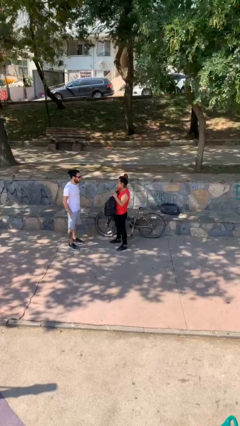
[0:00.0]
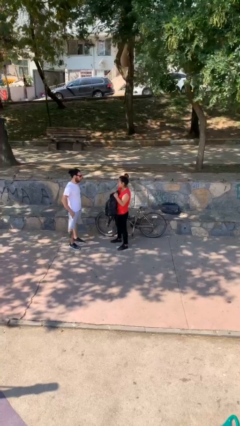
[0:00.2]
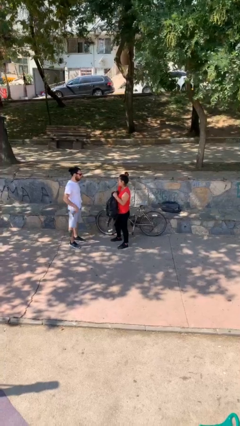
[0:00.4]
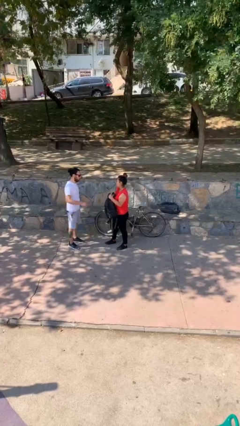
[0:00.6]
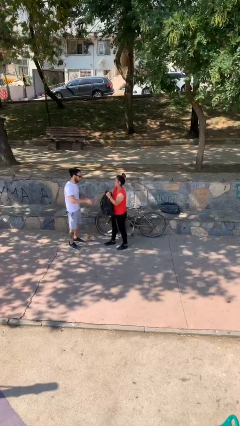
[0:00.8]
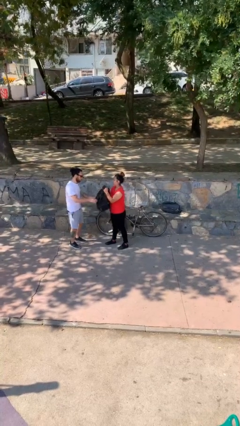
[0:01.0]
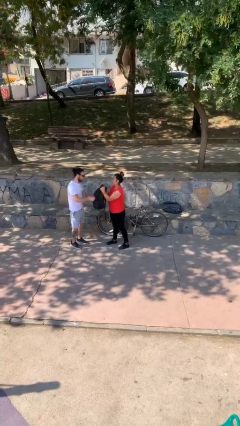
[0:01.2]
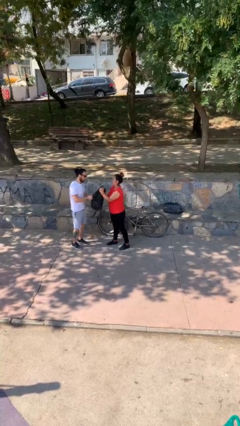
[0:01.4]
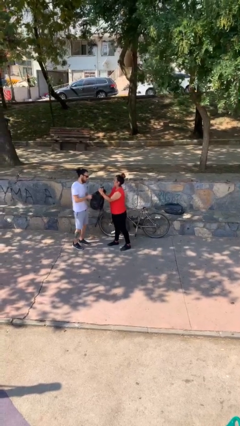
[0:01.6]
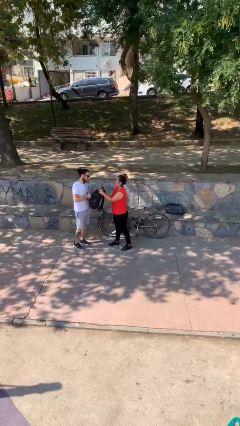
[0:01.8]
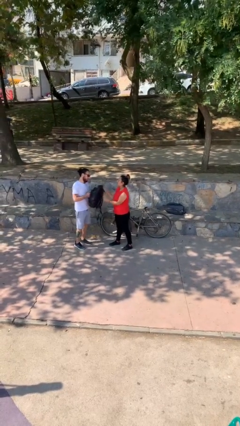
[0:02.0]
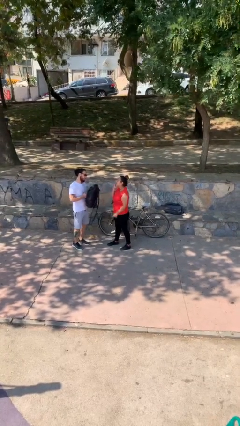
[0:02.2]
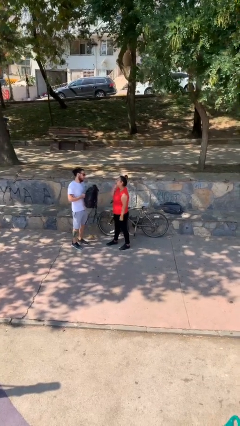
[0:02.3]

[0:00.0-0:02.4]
person transfers object to person

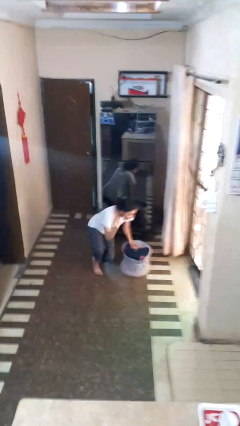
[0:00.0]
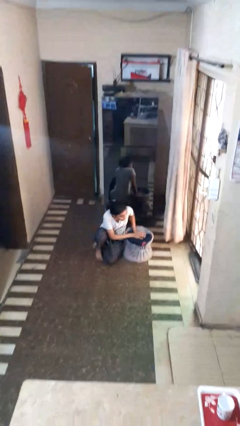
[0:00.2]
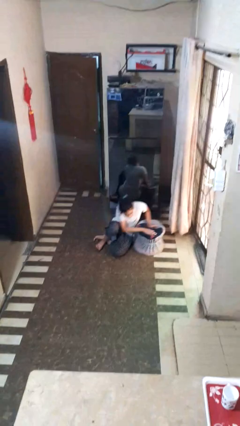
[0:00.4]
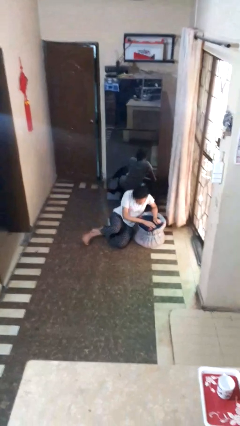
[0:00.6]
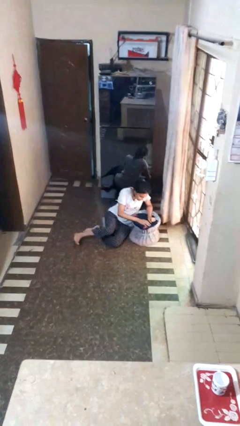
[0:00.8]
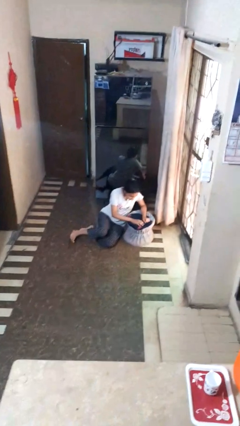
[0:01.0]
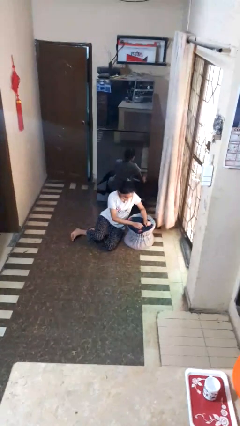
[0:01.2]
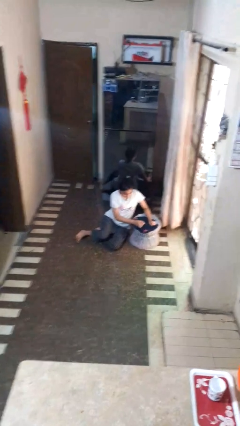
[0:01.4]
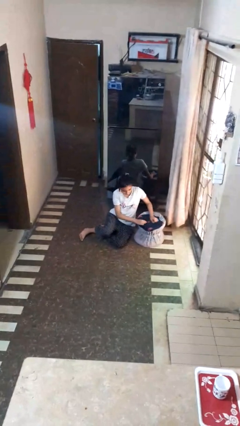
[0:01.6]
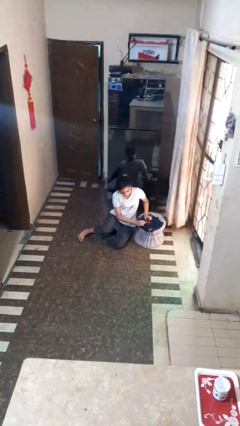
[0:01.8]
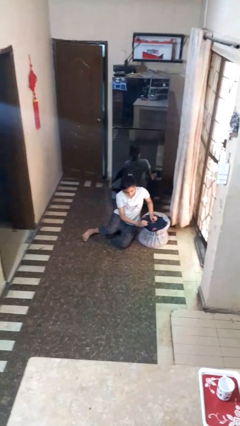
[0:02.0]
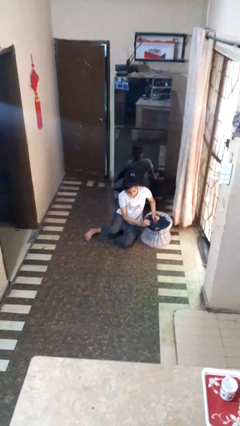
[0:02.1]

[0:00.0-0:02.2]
person lies down on floor

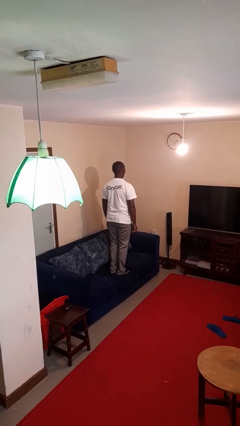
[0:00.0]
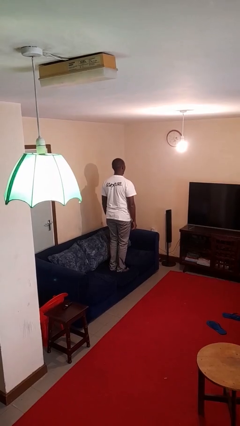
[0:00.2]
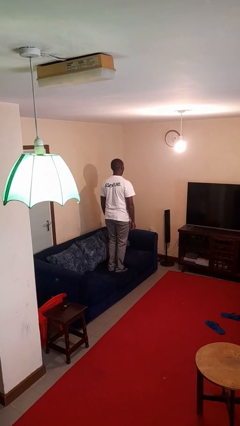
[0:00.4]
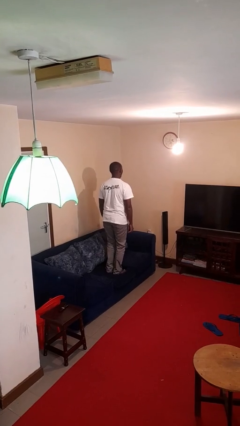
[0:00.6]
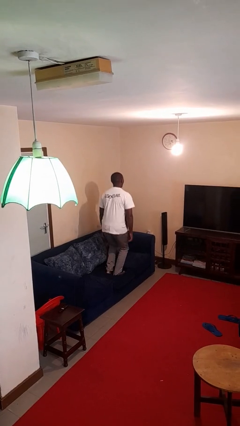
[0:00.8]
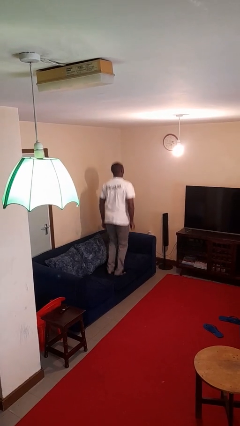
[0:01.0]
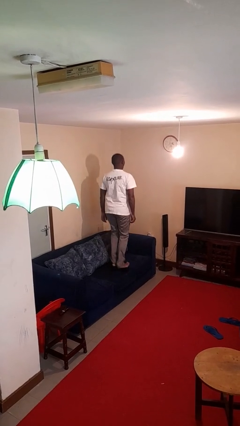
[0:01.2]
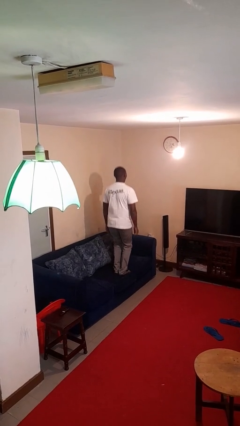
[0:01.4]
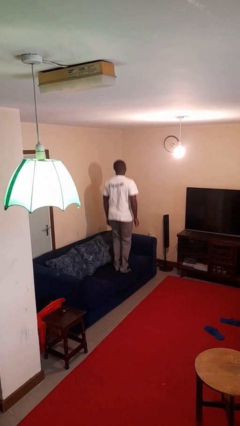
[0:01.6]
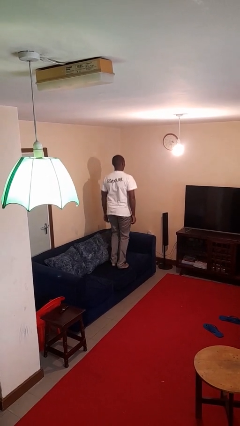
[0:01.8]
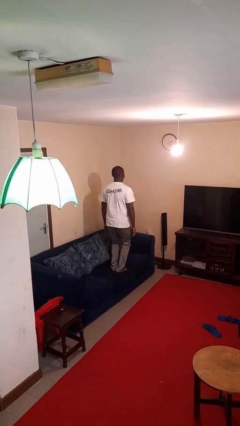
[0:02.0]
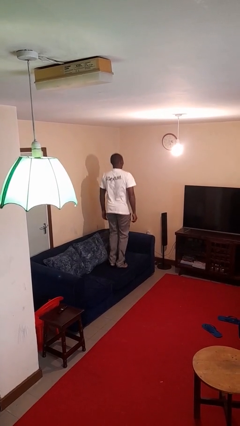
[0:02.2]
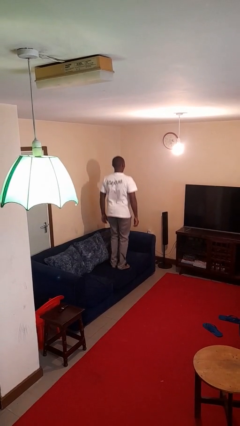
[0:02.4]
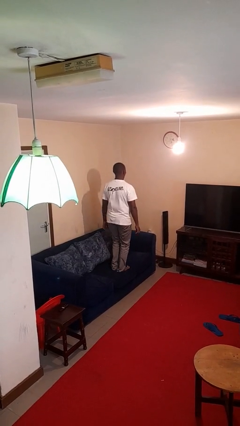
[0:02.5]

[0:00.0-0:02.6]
person jumps on couch

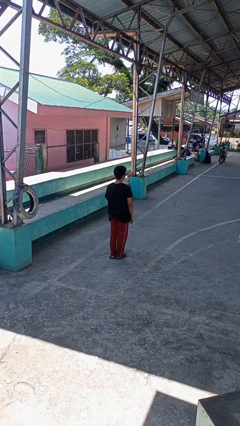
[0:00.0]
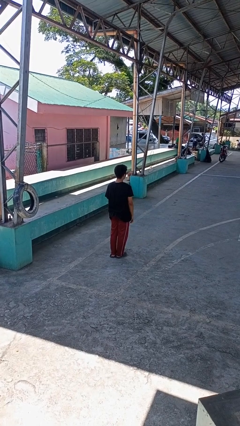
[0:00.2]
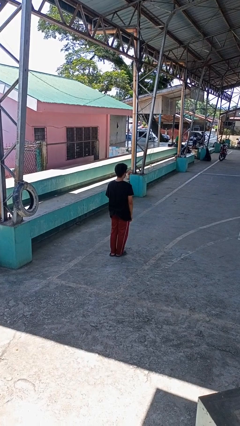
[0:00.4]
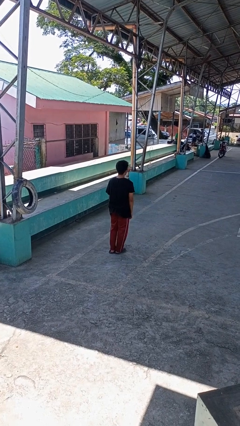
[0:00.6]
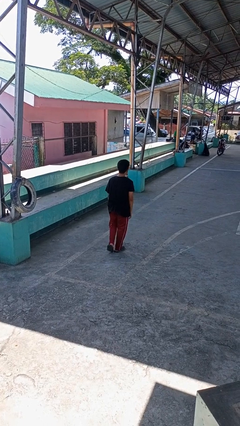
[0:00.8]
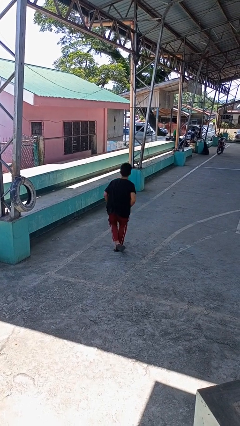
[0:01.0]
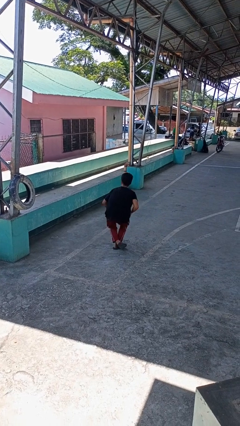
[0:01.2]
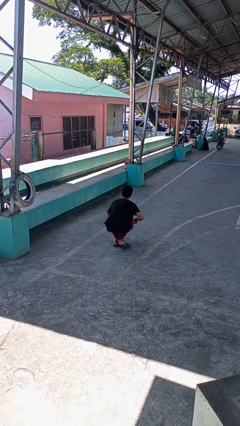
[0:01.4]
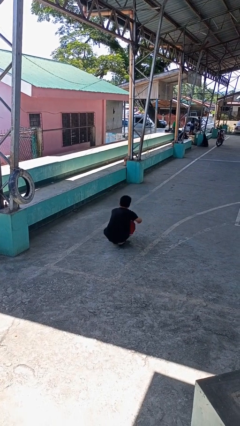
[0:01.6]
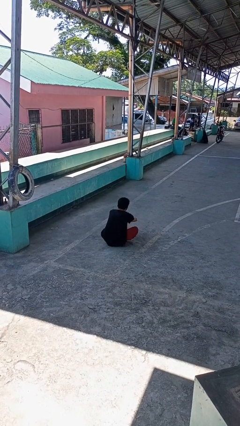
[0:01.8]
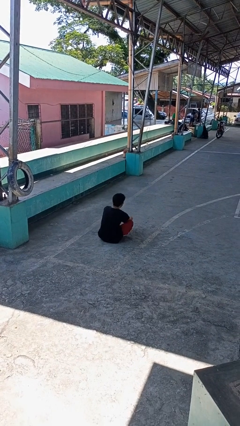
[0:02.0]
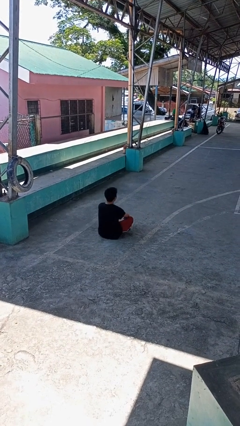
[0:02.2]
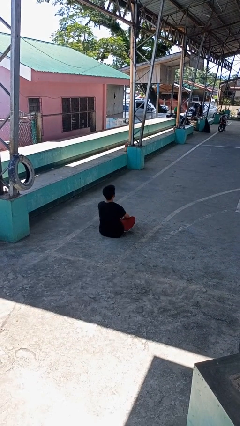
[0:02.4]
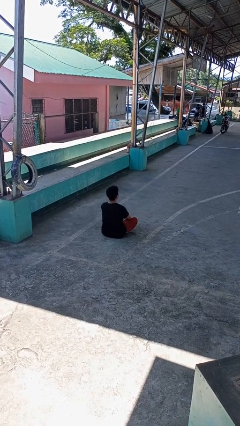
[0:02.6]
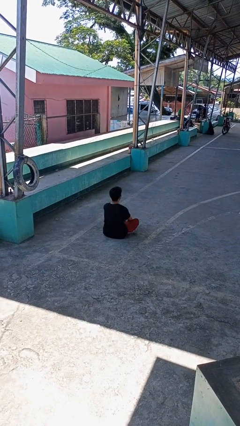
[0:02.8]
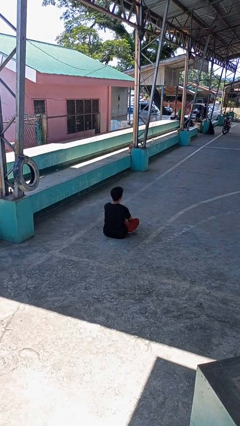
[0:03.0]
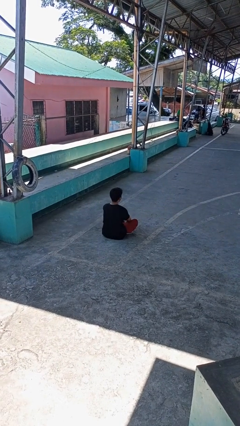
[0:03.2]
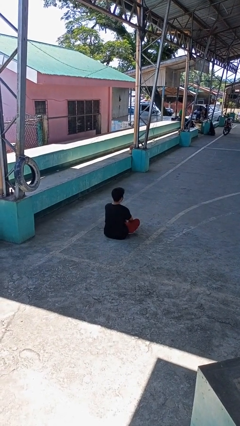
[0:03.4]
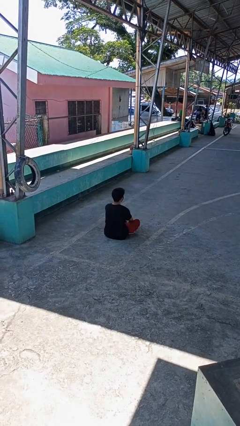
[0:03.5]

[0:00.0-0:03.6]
person sits crisscross

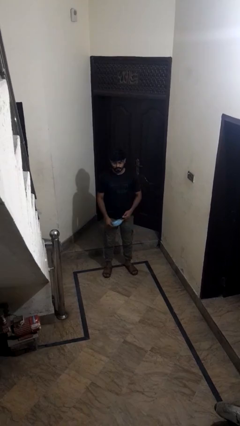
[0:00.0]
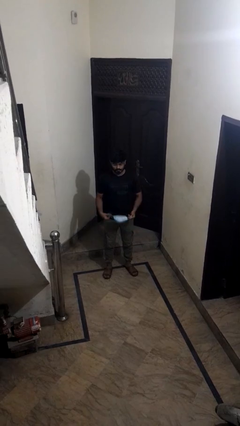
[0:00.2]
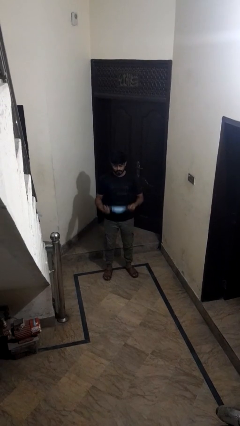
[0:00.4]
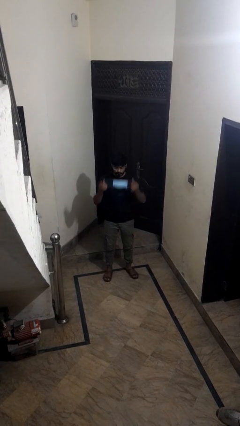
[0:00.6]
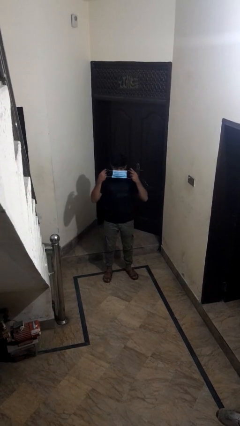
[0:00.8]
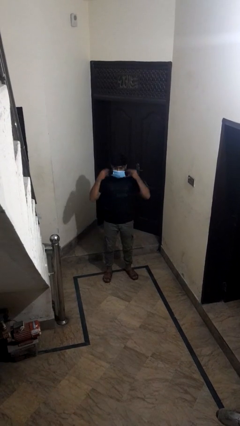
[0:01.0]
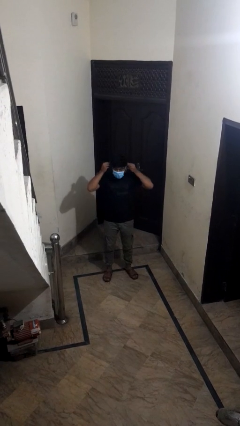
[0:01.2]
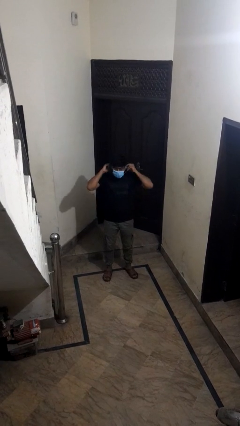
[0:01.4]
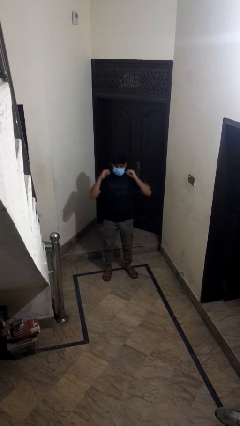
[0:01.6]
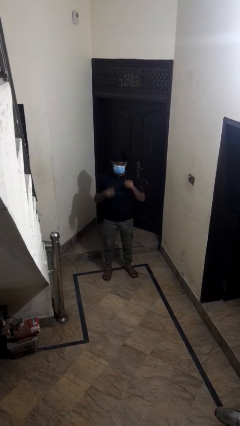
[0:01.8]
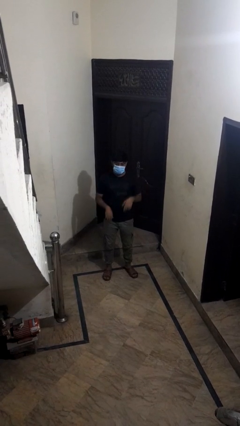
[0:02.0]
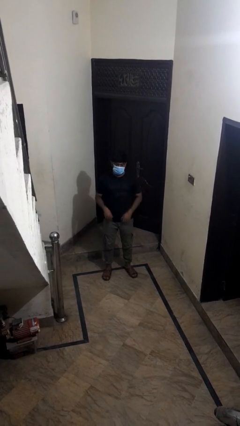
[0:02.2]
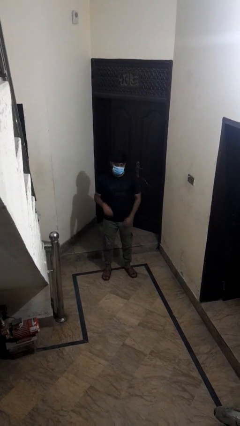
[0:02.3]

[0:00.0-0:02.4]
person puts on facemask

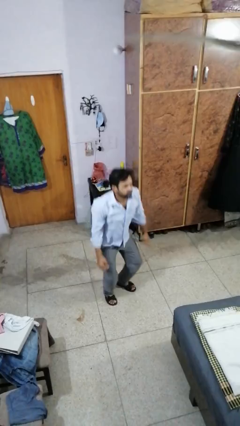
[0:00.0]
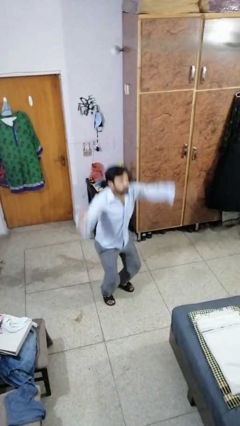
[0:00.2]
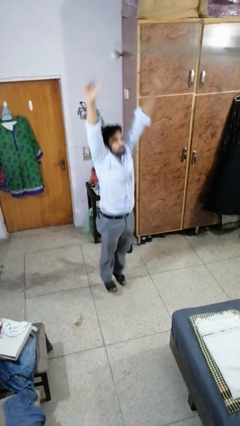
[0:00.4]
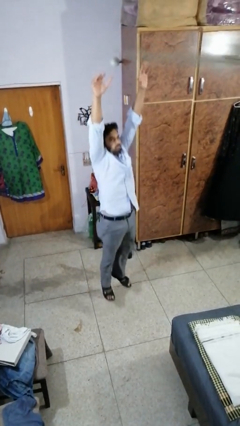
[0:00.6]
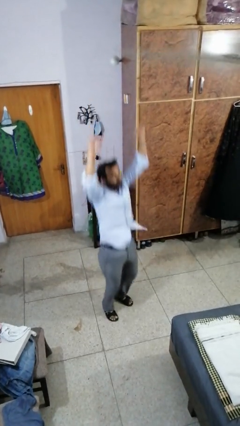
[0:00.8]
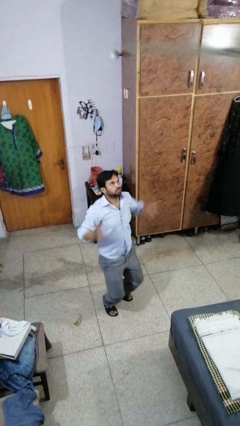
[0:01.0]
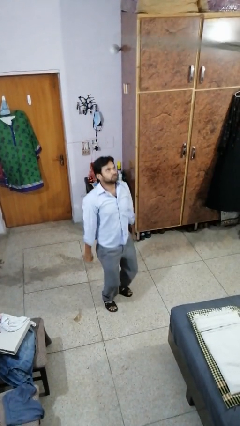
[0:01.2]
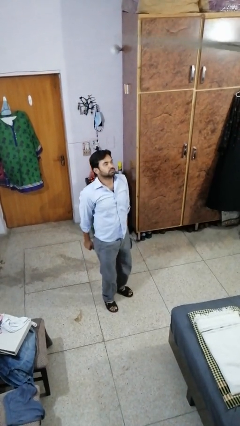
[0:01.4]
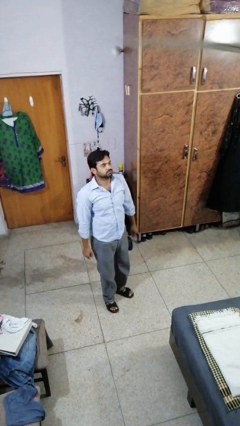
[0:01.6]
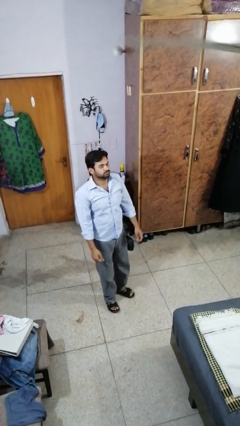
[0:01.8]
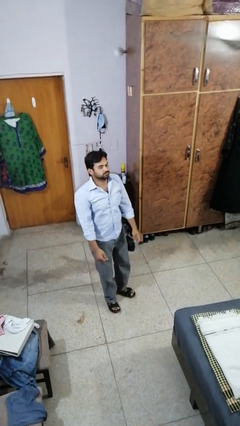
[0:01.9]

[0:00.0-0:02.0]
person jumps

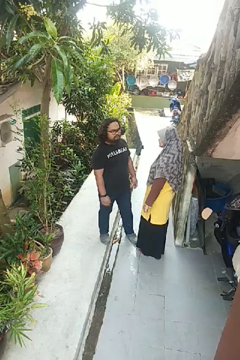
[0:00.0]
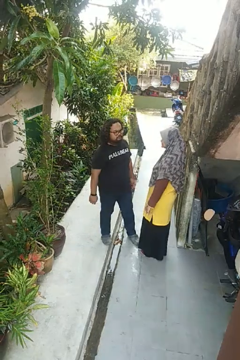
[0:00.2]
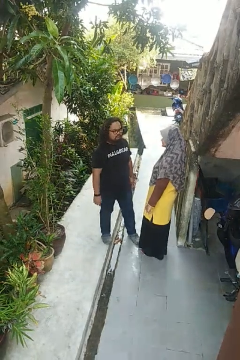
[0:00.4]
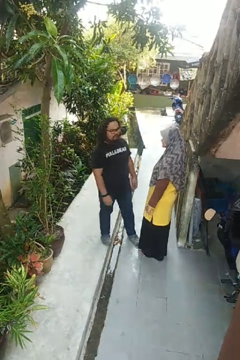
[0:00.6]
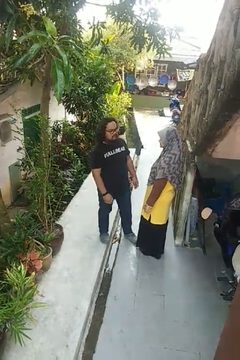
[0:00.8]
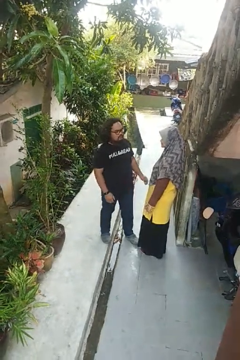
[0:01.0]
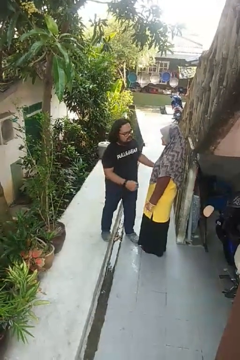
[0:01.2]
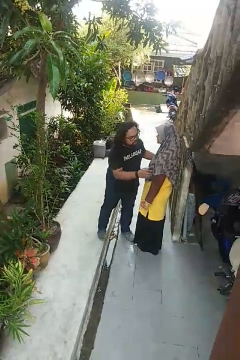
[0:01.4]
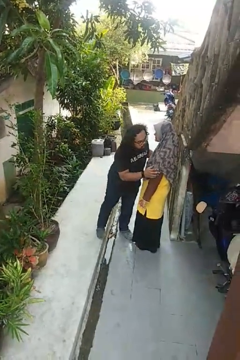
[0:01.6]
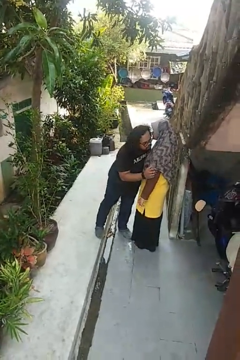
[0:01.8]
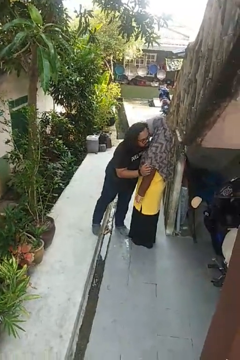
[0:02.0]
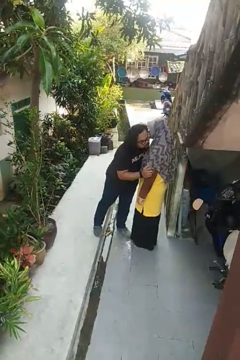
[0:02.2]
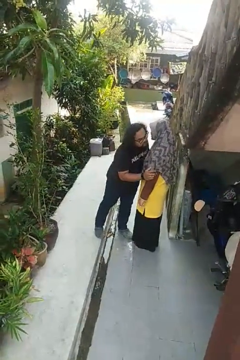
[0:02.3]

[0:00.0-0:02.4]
person kisses cheek of person
